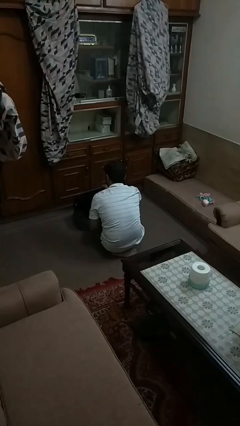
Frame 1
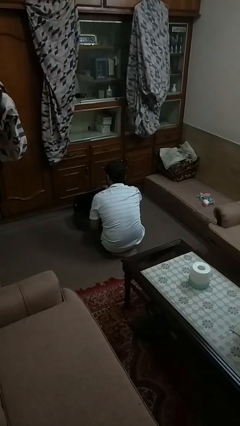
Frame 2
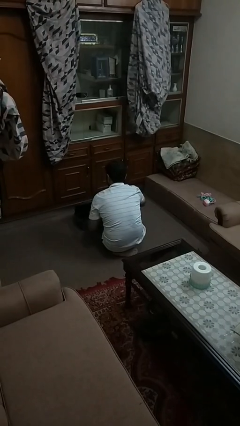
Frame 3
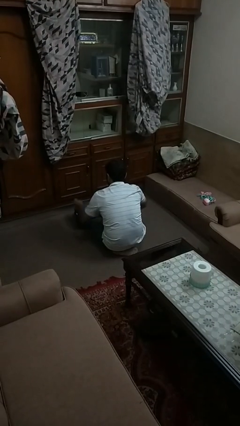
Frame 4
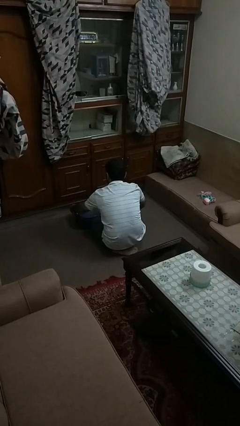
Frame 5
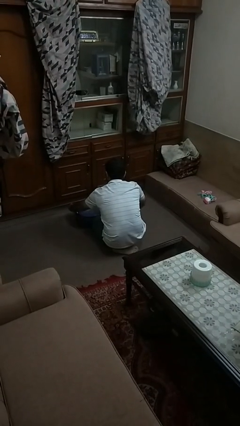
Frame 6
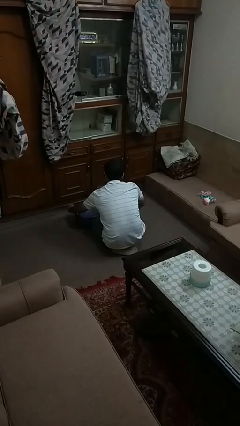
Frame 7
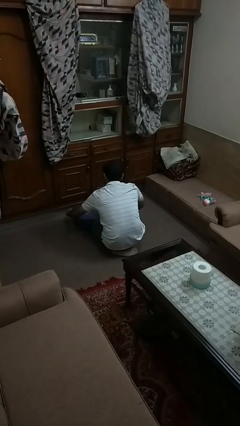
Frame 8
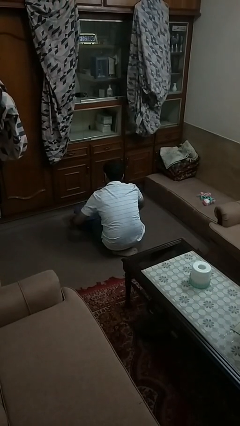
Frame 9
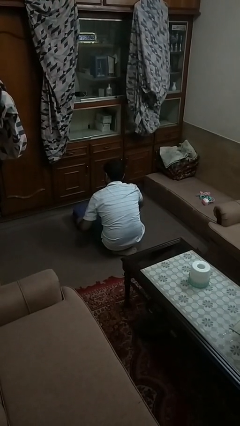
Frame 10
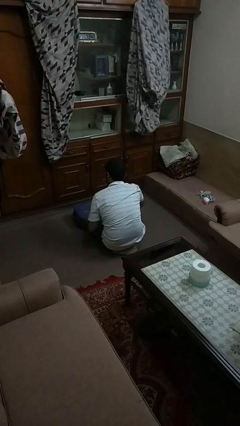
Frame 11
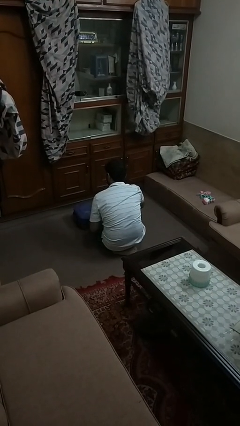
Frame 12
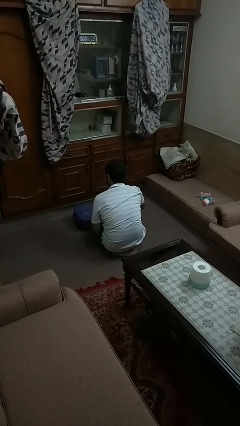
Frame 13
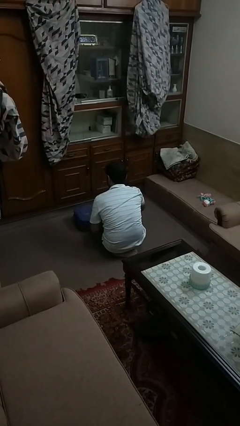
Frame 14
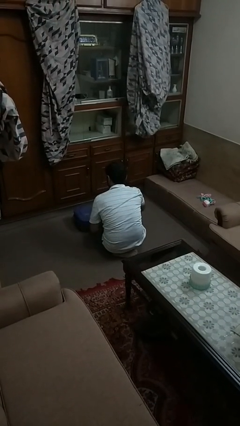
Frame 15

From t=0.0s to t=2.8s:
person closes suitcase

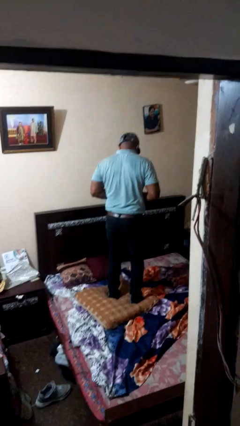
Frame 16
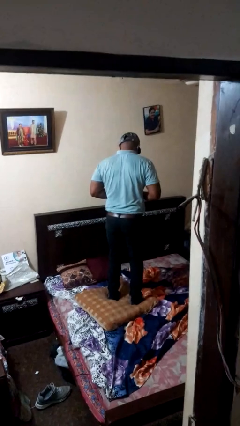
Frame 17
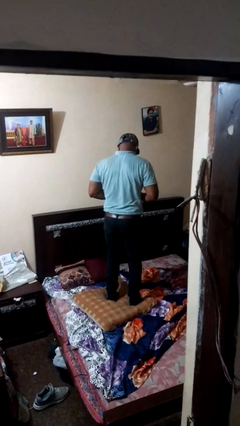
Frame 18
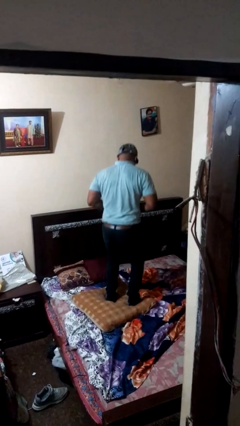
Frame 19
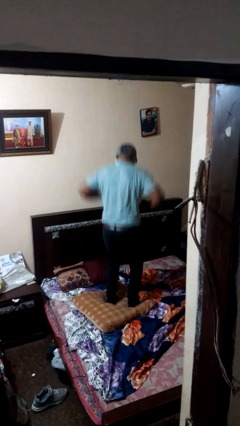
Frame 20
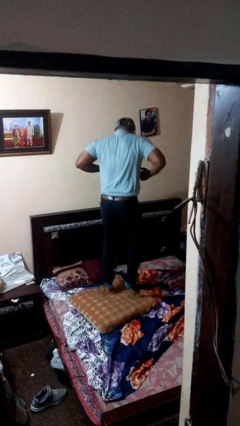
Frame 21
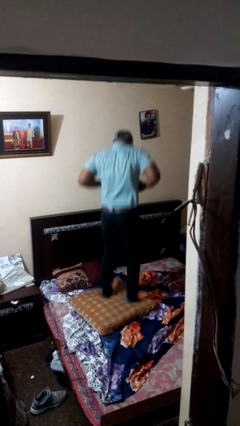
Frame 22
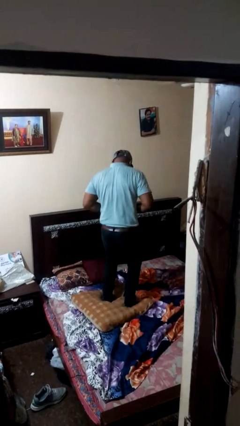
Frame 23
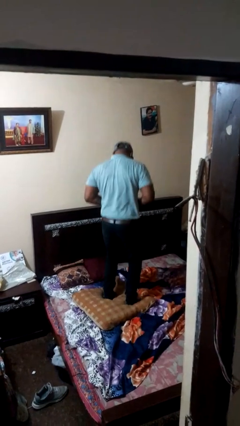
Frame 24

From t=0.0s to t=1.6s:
person jumps on bed

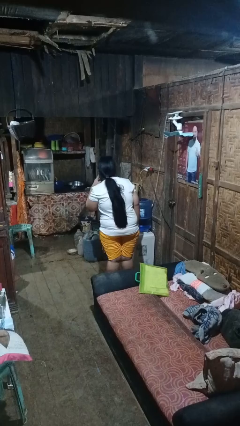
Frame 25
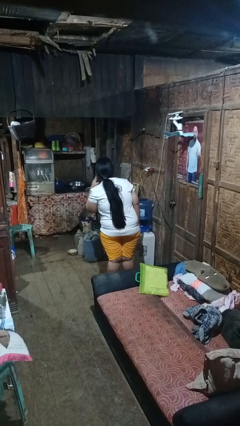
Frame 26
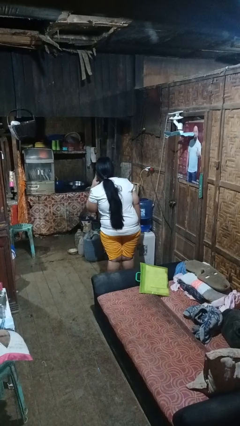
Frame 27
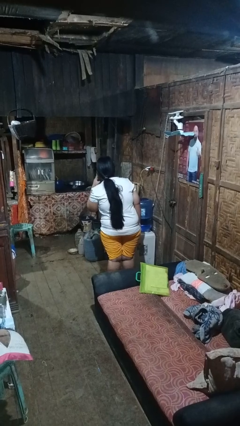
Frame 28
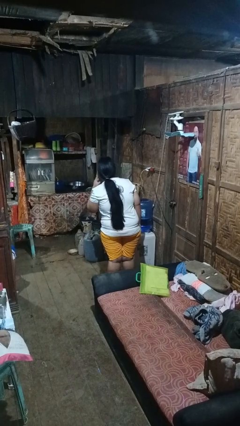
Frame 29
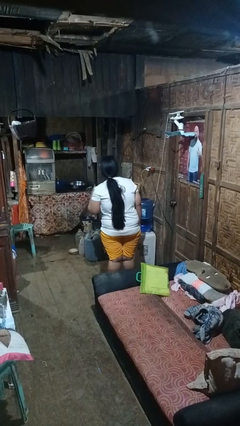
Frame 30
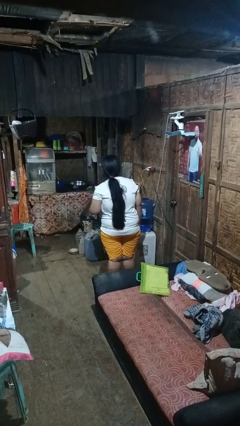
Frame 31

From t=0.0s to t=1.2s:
person gestures listen closely

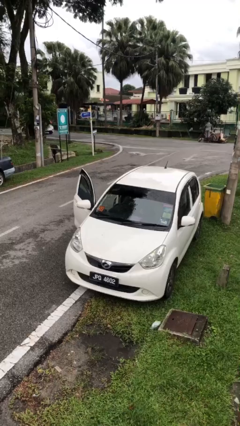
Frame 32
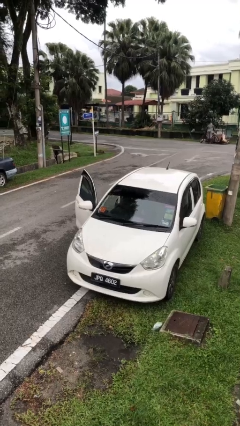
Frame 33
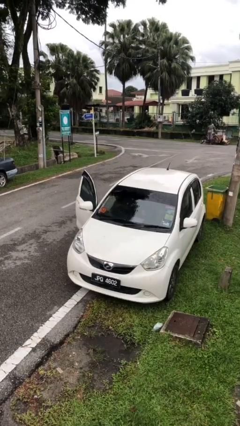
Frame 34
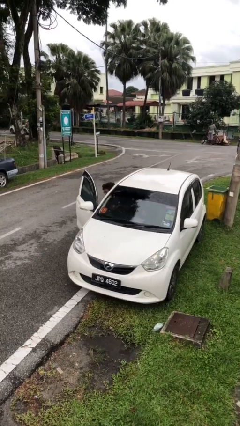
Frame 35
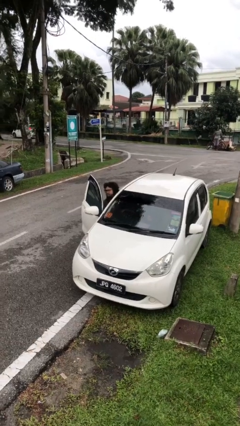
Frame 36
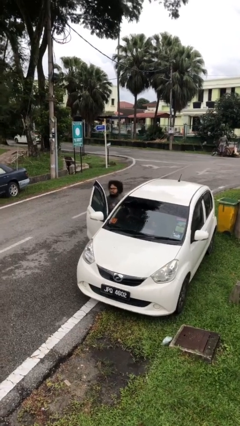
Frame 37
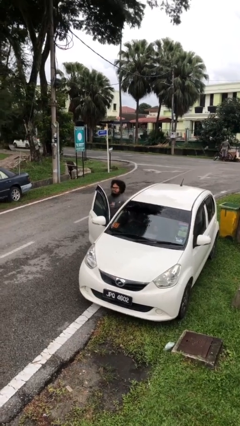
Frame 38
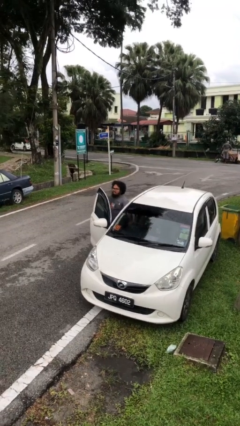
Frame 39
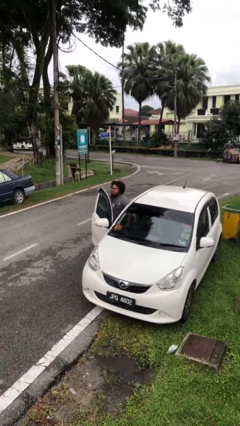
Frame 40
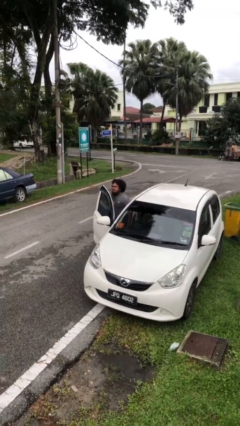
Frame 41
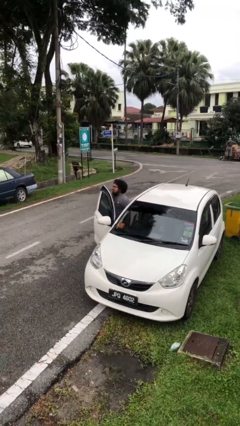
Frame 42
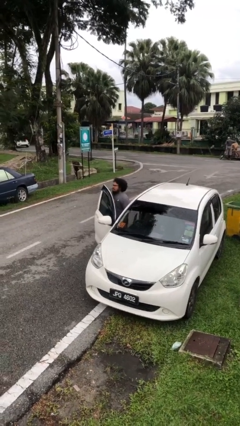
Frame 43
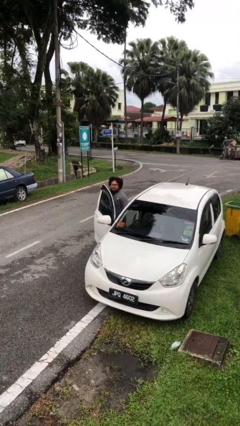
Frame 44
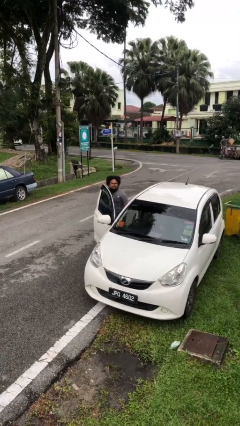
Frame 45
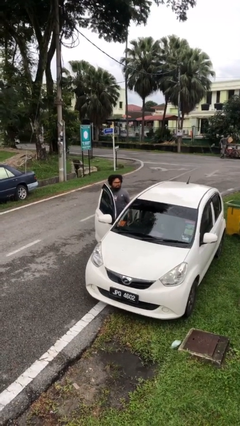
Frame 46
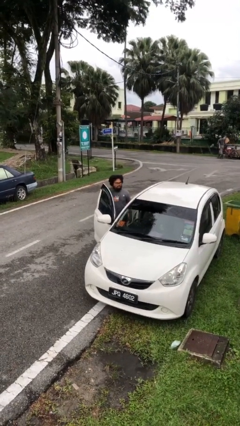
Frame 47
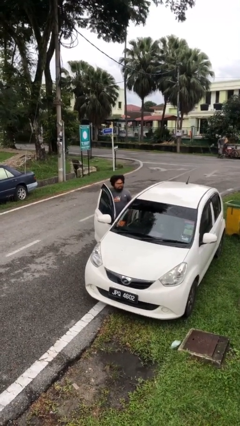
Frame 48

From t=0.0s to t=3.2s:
person exits car

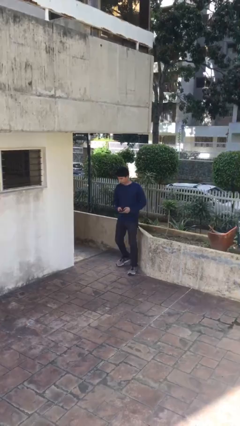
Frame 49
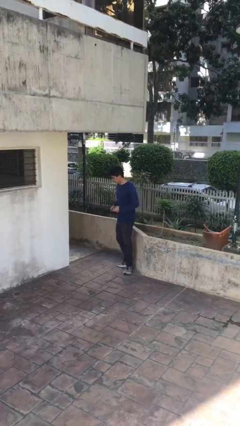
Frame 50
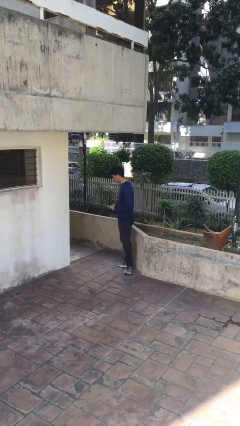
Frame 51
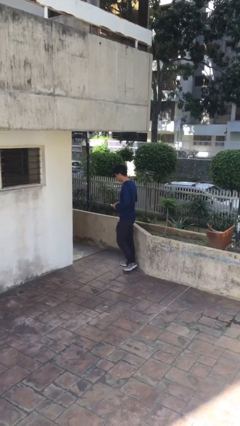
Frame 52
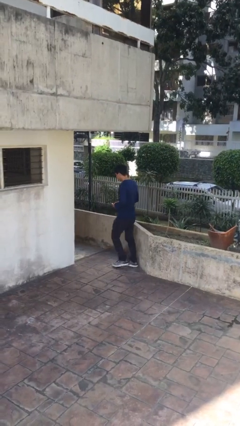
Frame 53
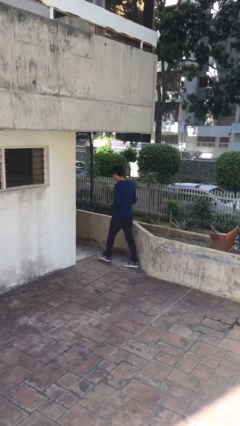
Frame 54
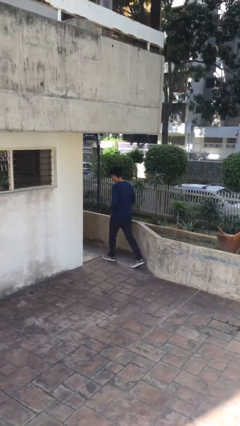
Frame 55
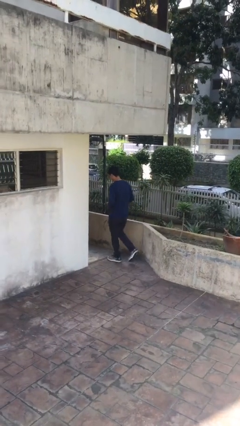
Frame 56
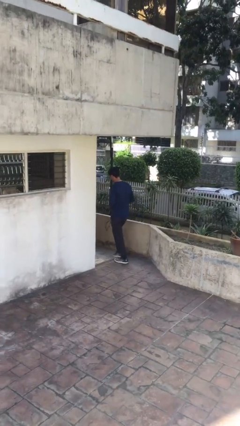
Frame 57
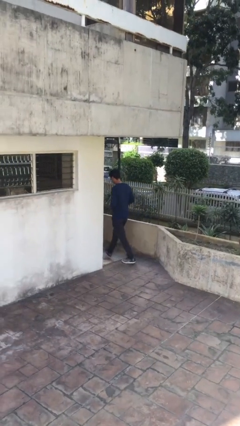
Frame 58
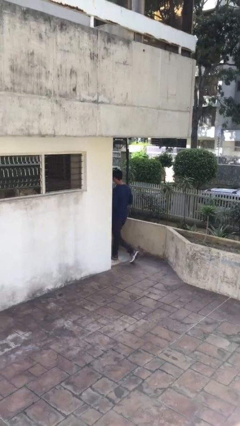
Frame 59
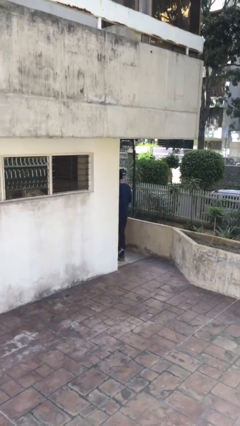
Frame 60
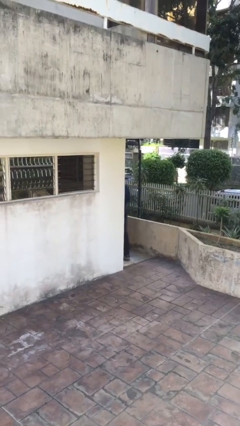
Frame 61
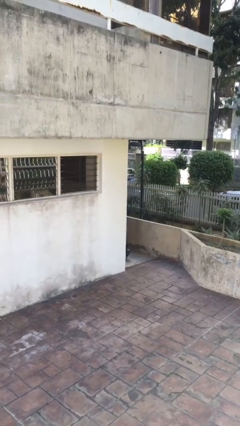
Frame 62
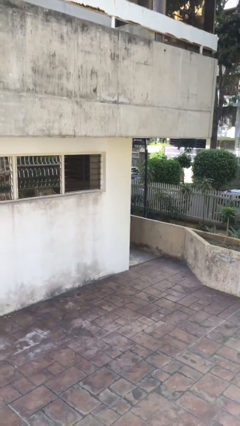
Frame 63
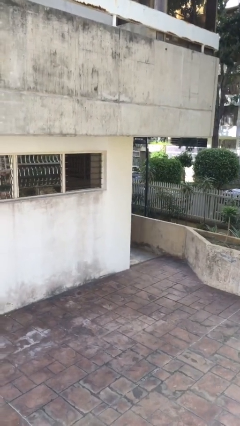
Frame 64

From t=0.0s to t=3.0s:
person exits scene through structure

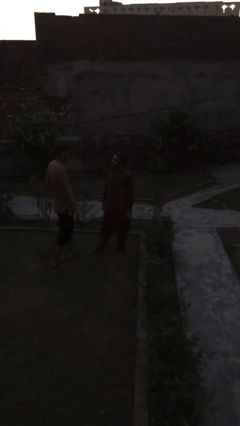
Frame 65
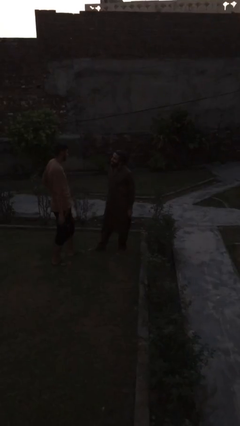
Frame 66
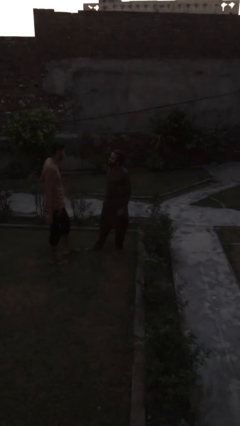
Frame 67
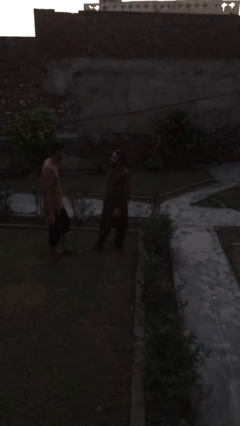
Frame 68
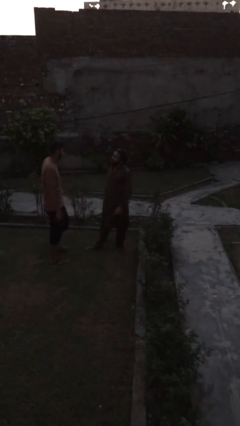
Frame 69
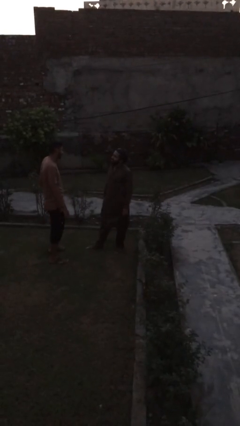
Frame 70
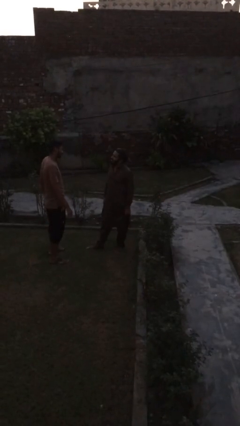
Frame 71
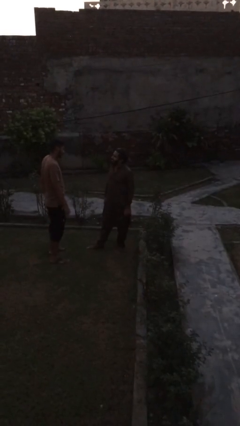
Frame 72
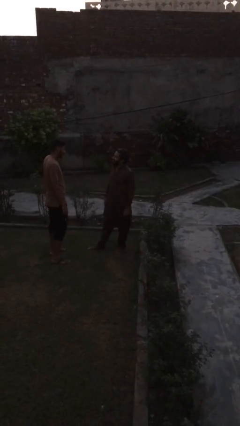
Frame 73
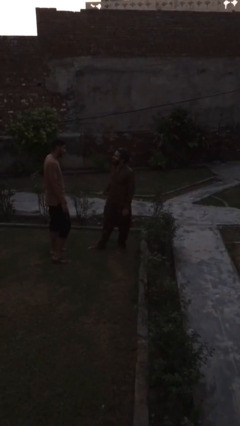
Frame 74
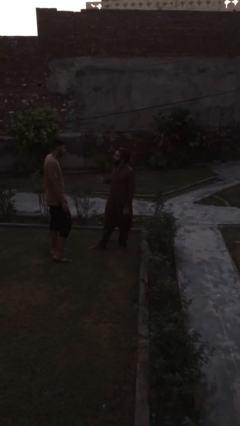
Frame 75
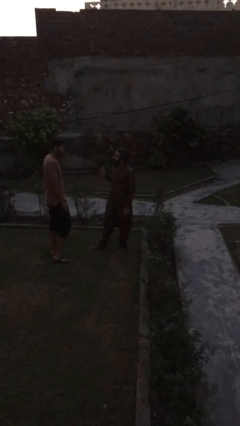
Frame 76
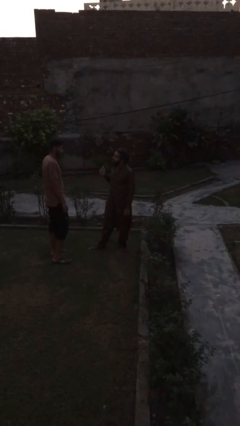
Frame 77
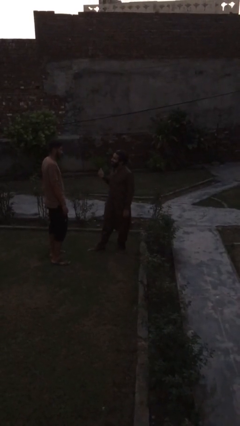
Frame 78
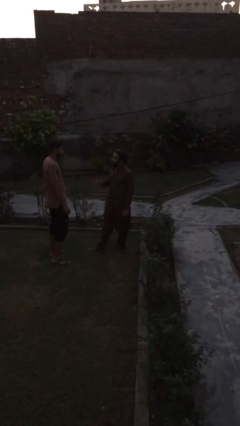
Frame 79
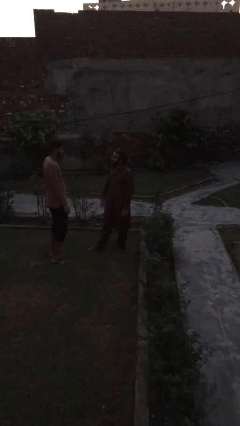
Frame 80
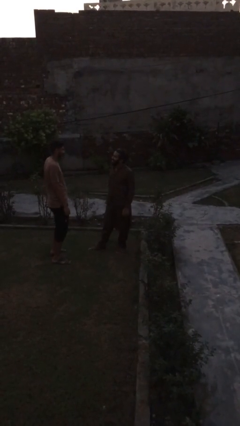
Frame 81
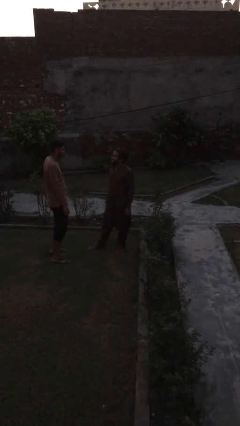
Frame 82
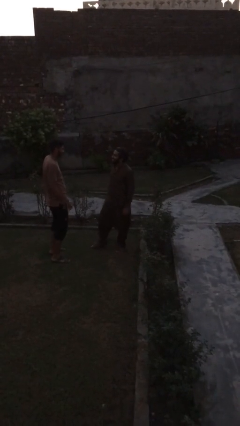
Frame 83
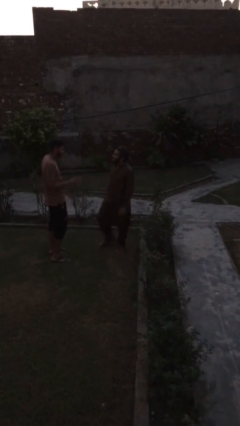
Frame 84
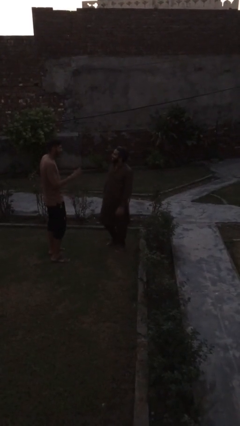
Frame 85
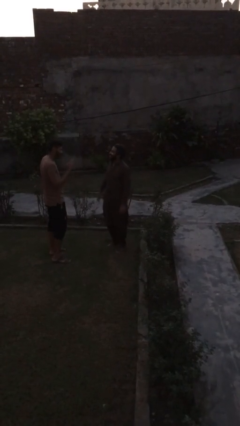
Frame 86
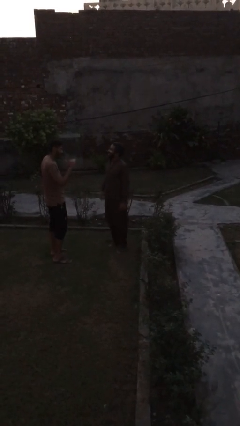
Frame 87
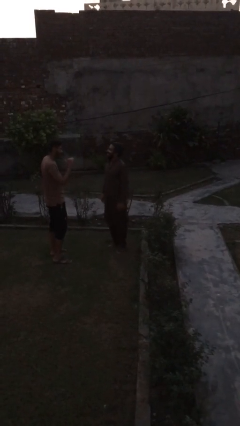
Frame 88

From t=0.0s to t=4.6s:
person talks to person

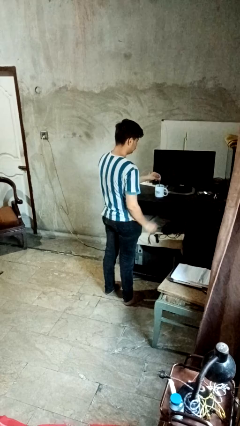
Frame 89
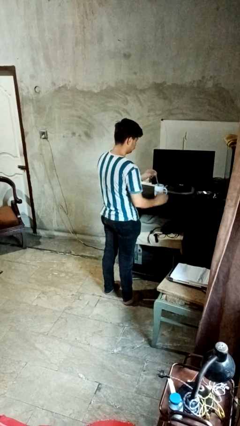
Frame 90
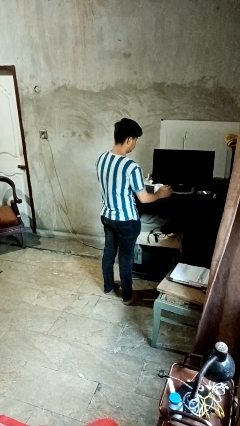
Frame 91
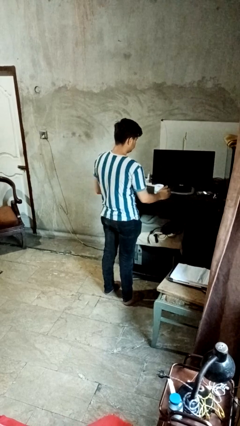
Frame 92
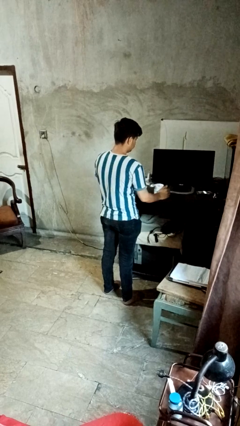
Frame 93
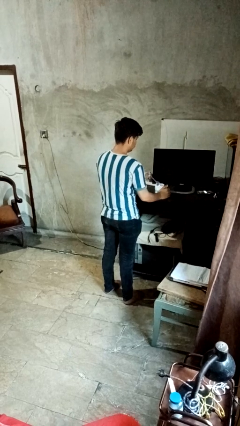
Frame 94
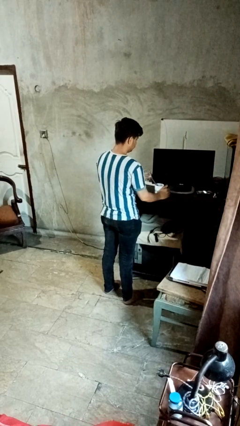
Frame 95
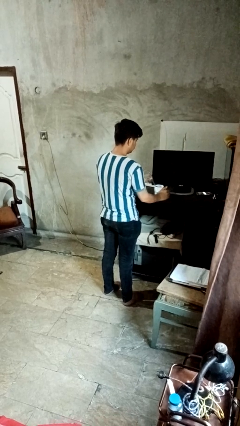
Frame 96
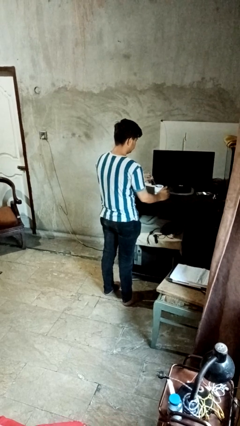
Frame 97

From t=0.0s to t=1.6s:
person stirs mug
